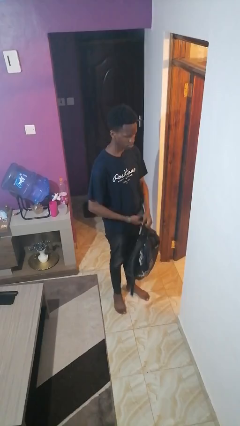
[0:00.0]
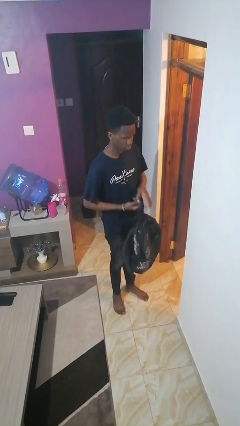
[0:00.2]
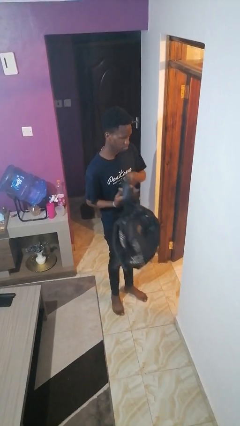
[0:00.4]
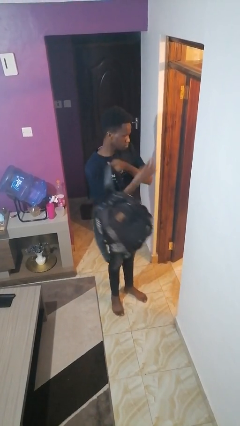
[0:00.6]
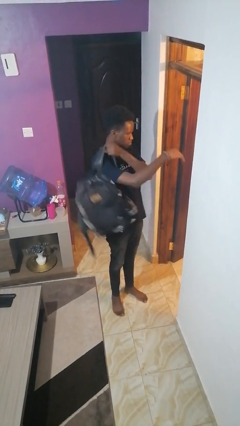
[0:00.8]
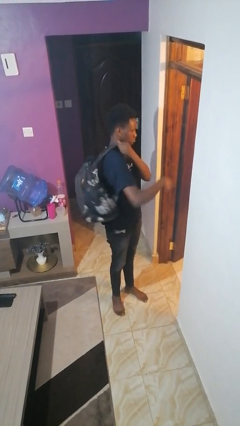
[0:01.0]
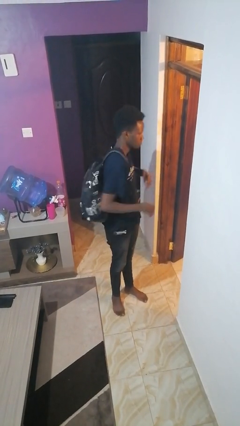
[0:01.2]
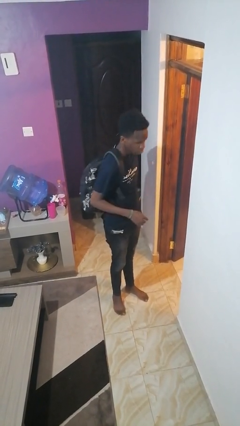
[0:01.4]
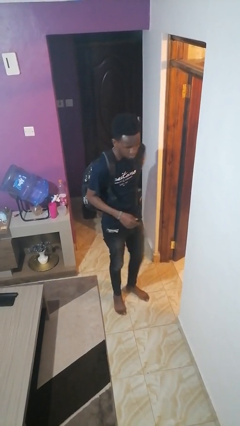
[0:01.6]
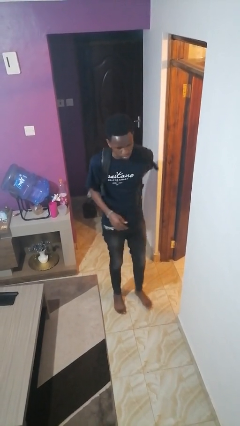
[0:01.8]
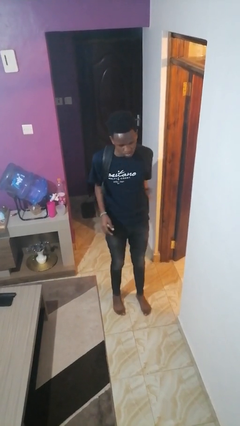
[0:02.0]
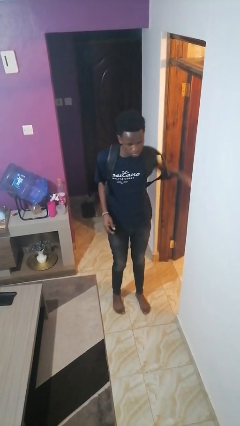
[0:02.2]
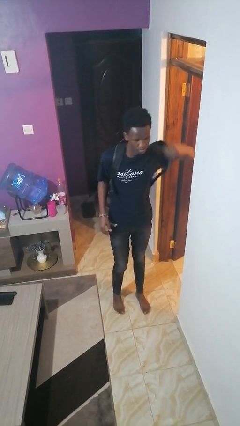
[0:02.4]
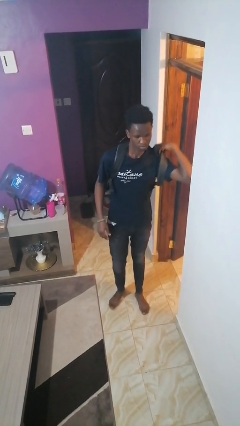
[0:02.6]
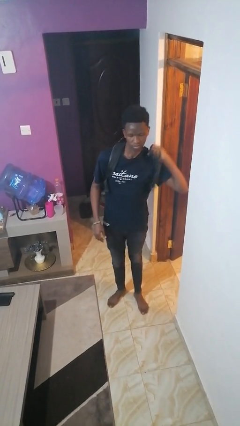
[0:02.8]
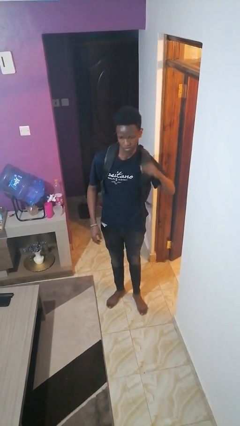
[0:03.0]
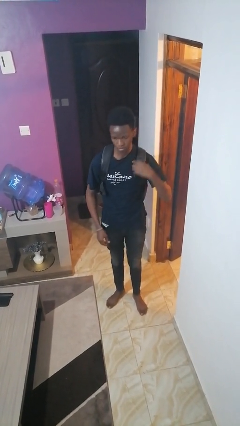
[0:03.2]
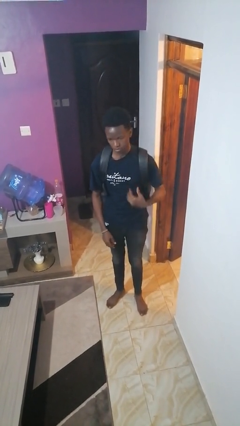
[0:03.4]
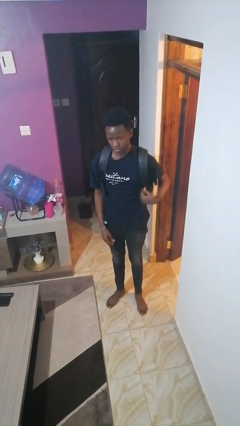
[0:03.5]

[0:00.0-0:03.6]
person puts on backpack

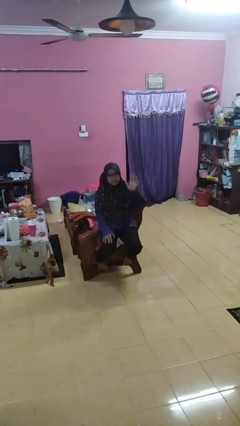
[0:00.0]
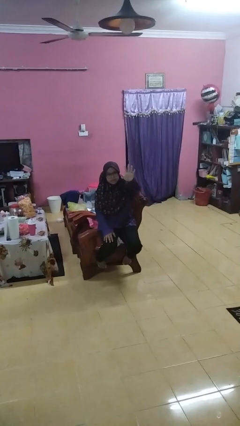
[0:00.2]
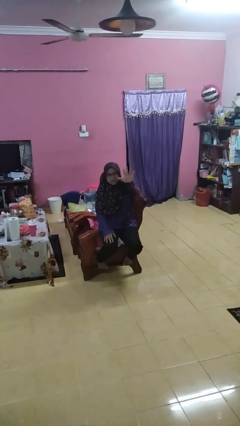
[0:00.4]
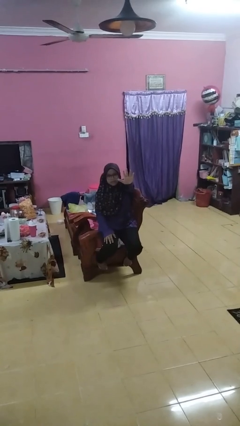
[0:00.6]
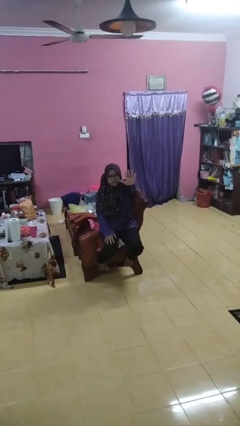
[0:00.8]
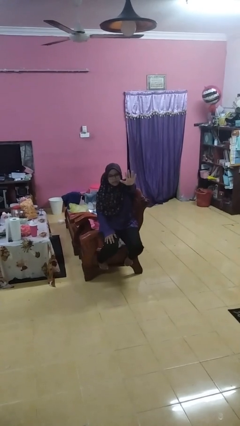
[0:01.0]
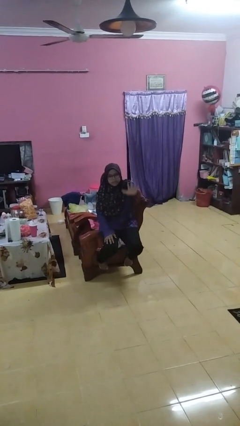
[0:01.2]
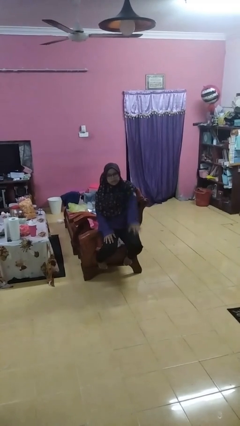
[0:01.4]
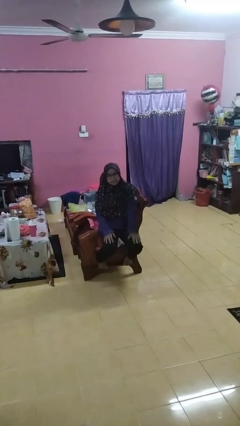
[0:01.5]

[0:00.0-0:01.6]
person gestures number five

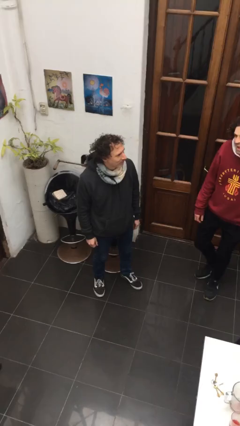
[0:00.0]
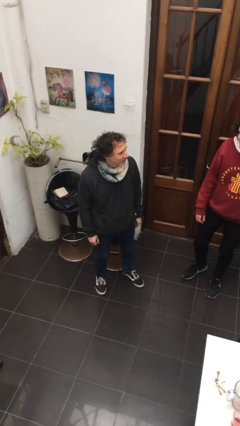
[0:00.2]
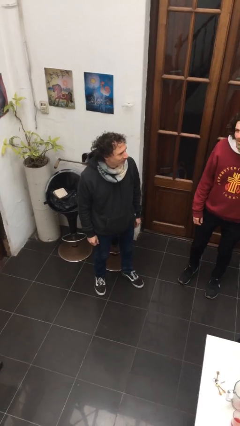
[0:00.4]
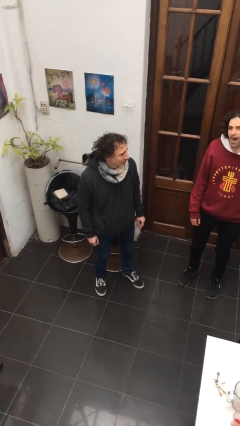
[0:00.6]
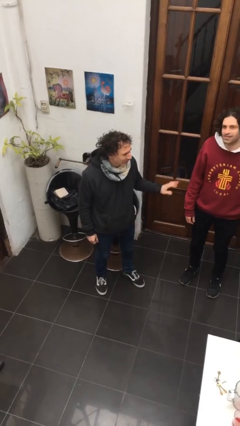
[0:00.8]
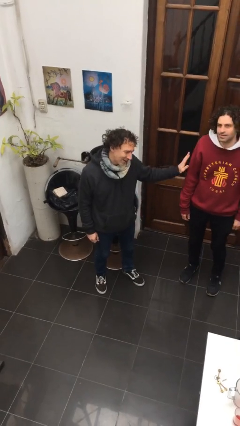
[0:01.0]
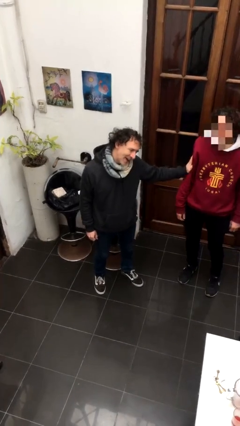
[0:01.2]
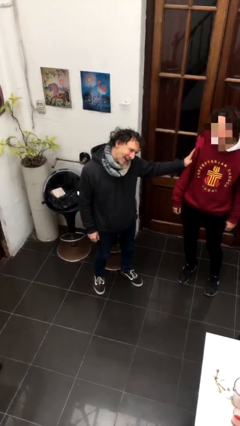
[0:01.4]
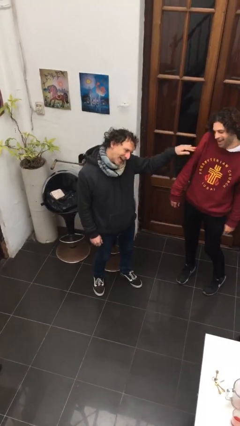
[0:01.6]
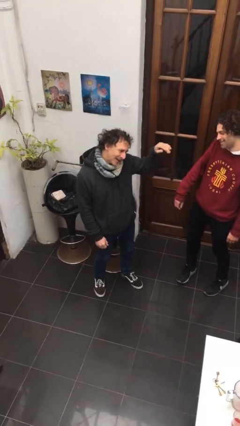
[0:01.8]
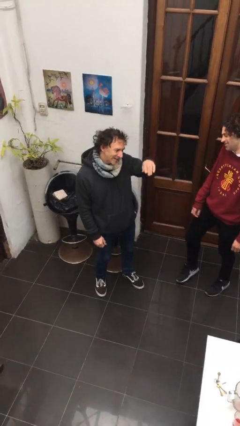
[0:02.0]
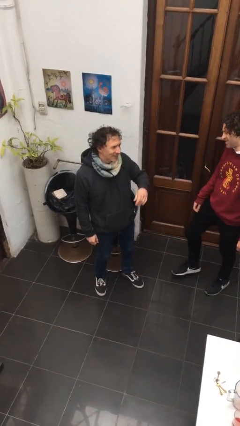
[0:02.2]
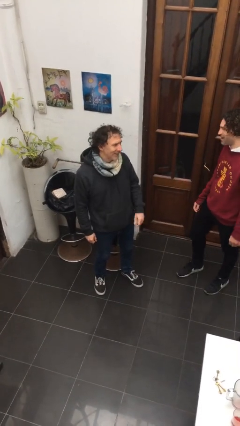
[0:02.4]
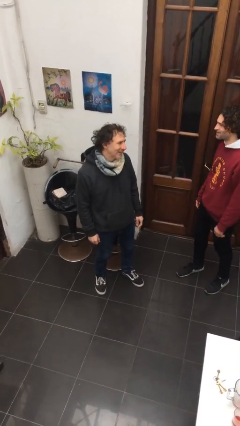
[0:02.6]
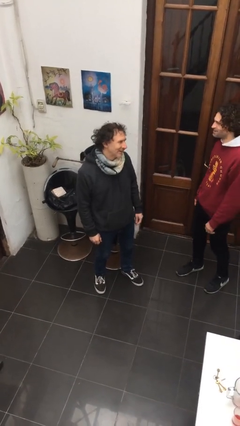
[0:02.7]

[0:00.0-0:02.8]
person shoves person

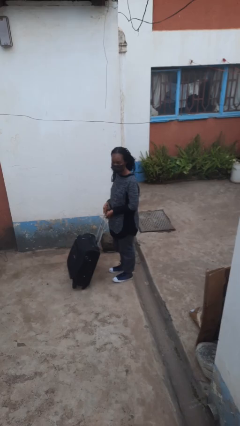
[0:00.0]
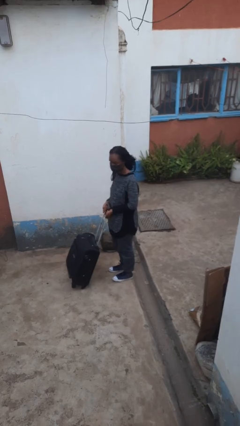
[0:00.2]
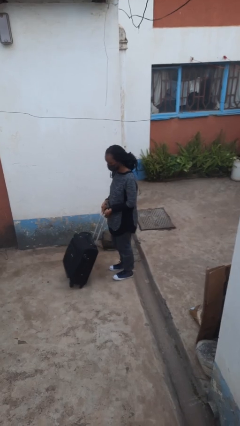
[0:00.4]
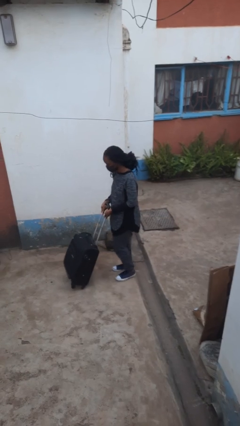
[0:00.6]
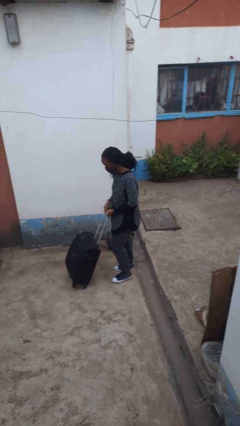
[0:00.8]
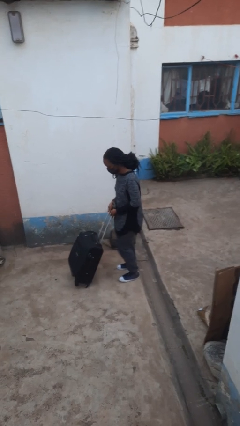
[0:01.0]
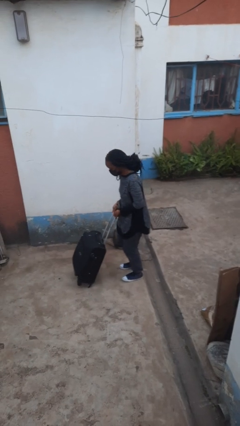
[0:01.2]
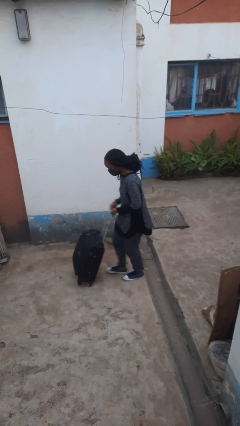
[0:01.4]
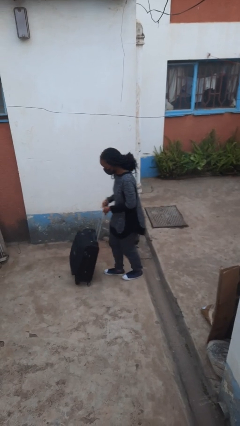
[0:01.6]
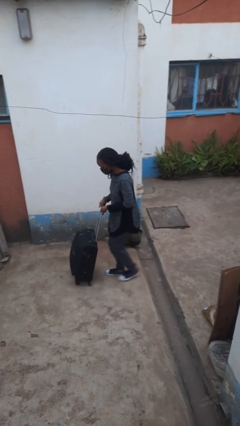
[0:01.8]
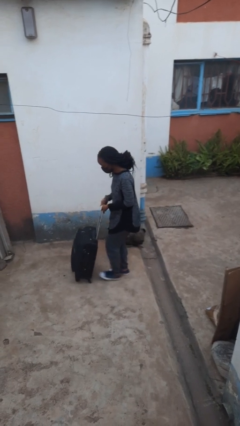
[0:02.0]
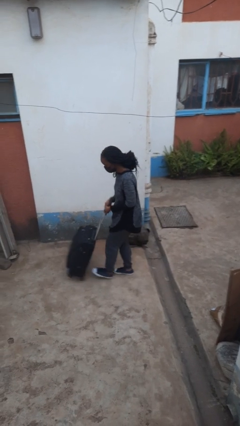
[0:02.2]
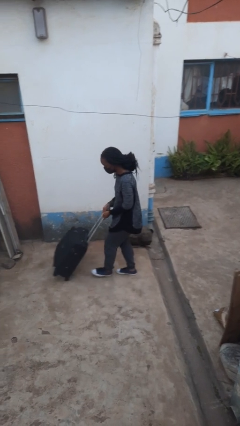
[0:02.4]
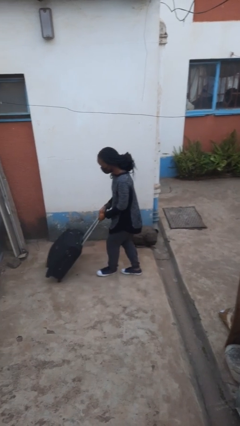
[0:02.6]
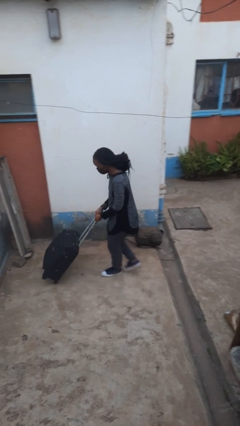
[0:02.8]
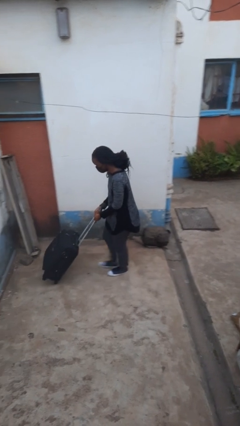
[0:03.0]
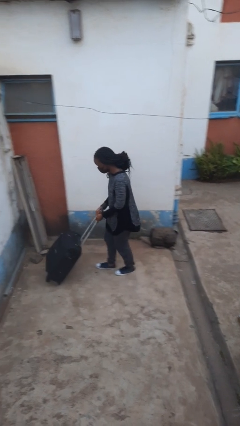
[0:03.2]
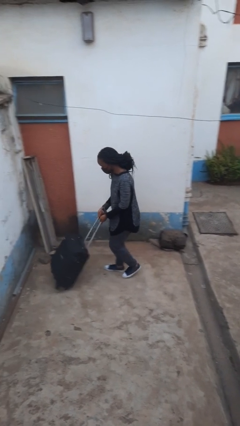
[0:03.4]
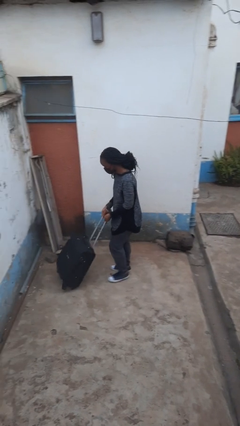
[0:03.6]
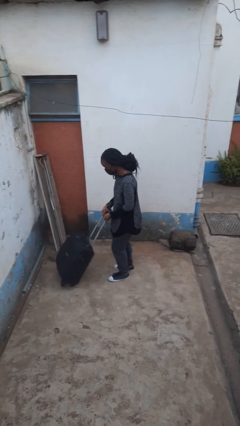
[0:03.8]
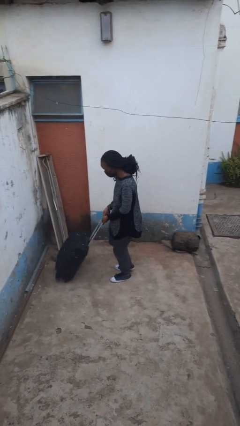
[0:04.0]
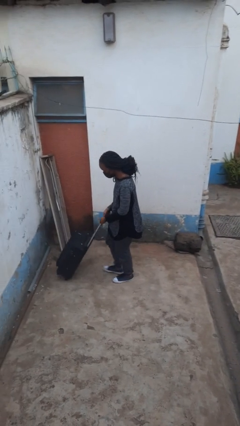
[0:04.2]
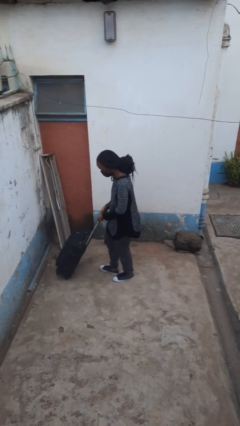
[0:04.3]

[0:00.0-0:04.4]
person pushes wheeled cart

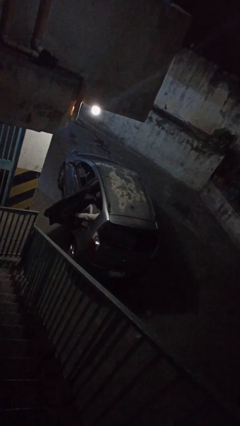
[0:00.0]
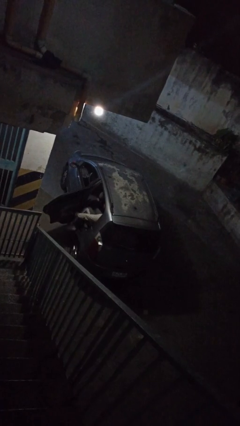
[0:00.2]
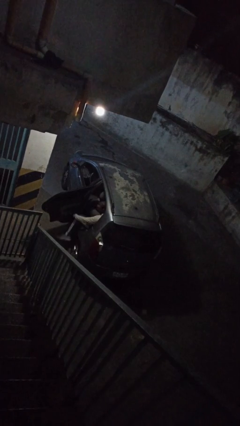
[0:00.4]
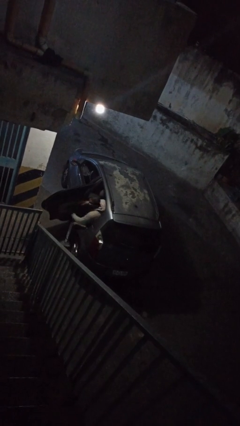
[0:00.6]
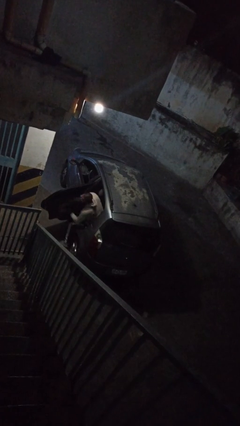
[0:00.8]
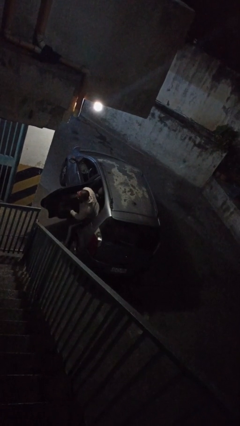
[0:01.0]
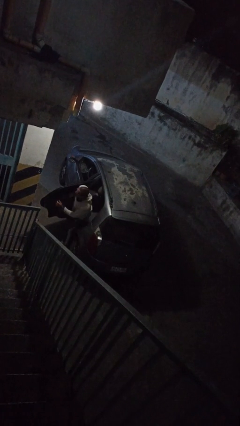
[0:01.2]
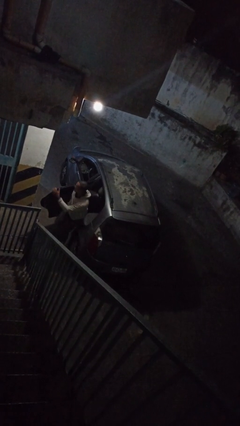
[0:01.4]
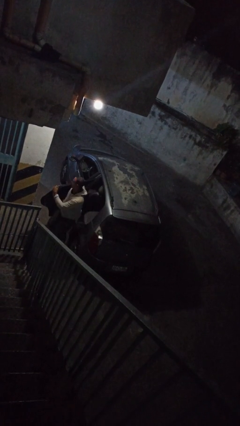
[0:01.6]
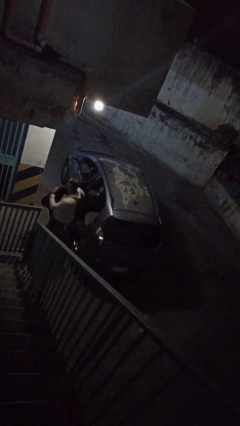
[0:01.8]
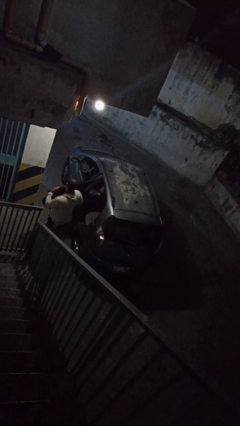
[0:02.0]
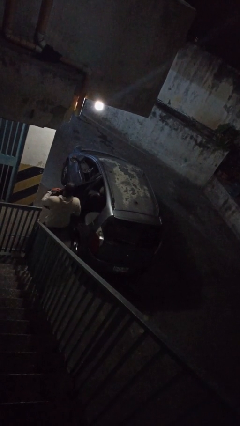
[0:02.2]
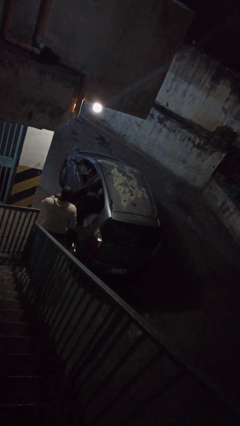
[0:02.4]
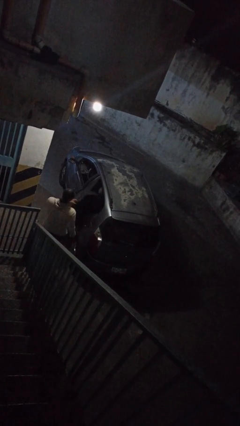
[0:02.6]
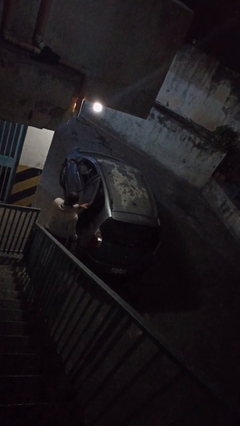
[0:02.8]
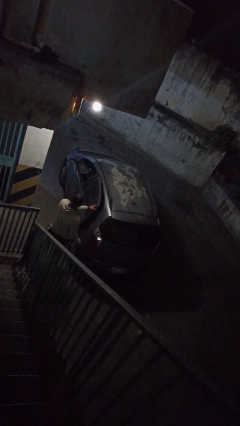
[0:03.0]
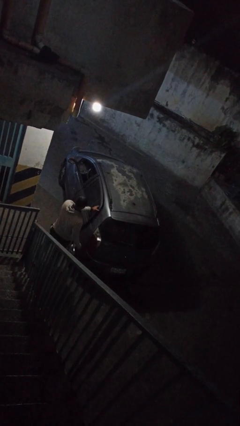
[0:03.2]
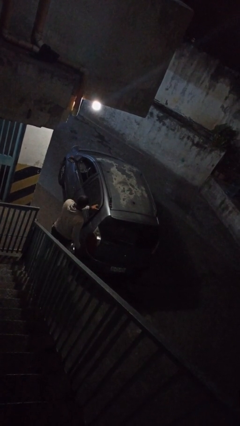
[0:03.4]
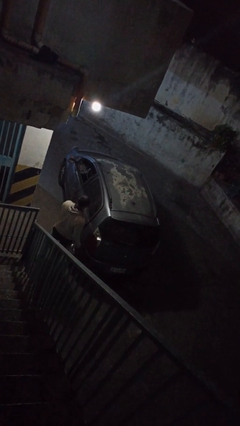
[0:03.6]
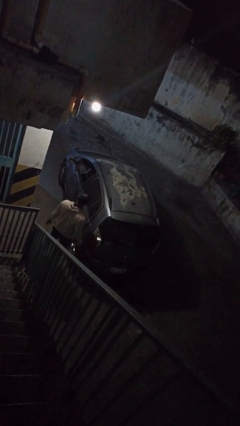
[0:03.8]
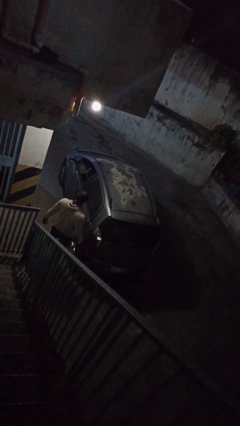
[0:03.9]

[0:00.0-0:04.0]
car drops off person

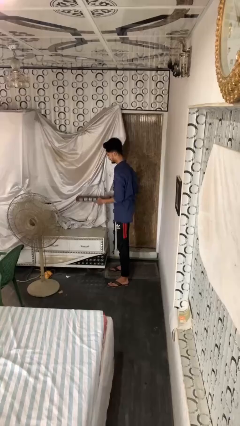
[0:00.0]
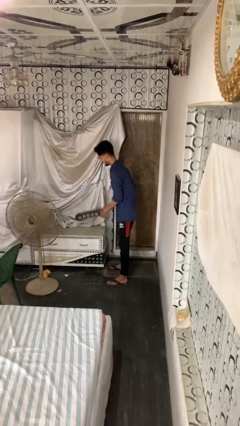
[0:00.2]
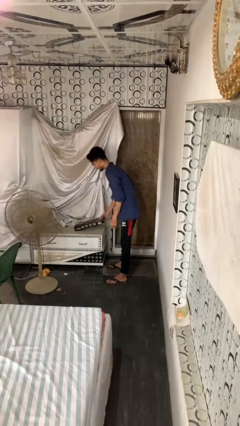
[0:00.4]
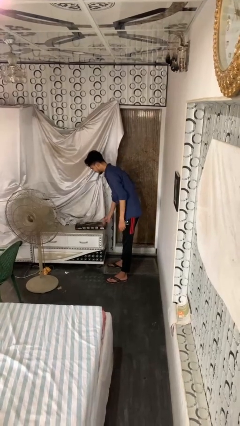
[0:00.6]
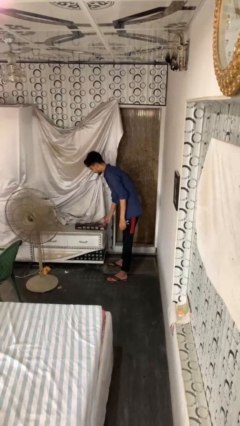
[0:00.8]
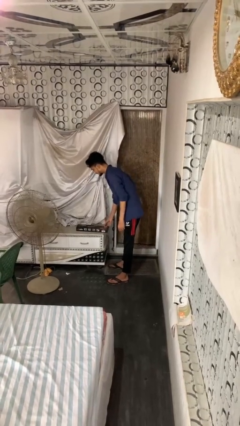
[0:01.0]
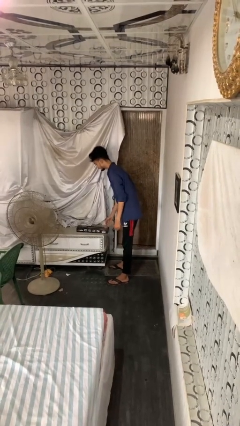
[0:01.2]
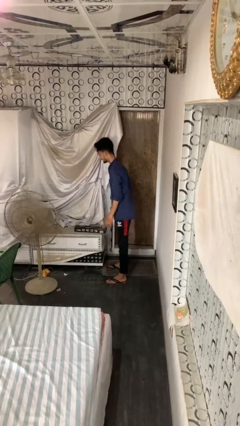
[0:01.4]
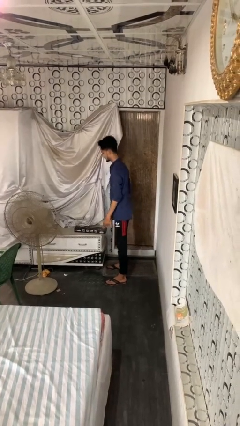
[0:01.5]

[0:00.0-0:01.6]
person puts down object on countertop
